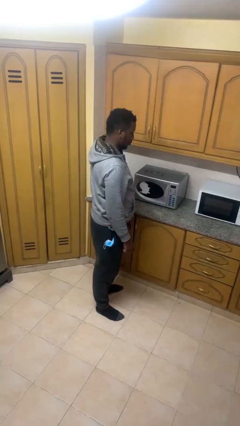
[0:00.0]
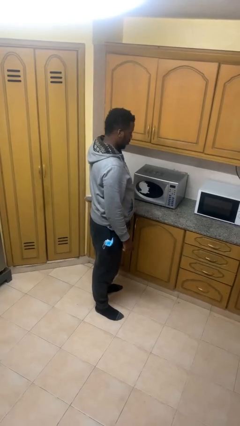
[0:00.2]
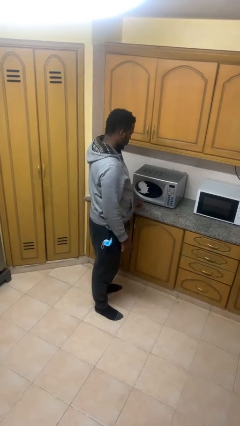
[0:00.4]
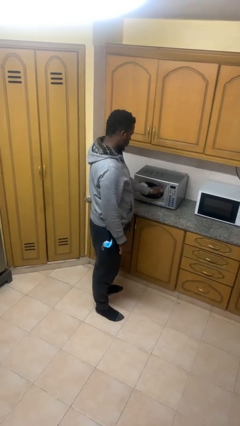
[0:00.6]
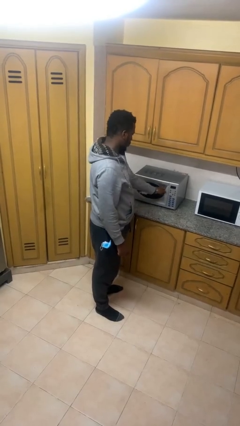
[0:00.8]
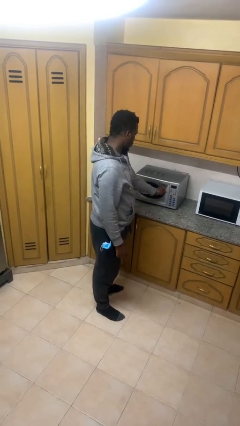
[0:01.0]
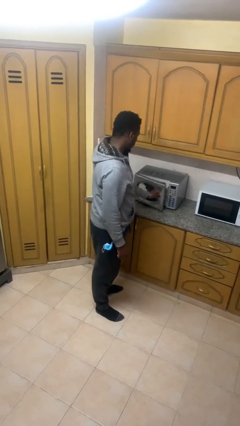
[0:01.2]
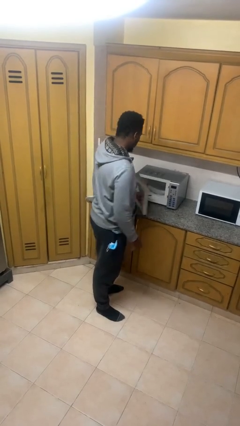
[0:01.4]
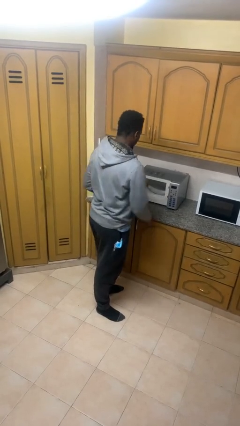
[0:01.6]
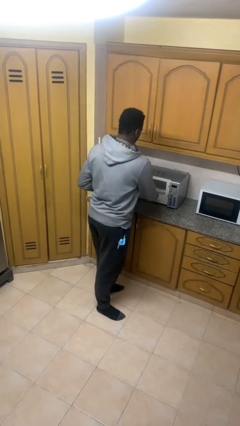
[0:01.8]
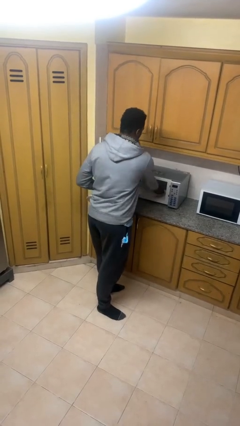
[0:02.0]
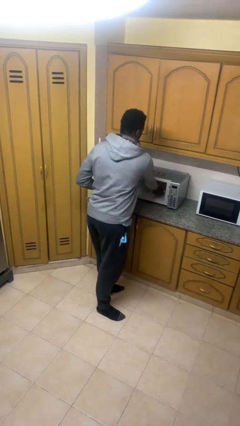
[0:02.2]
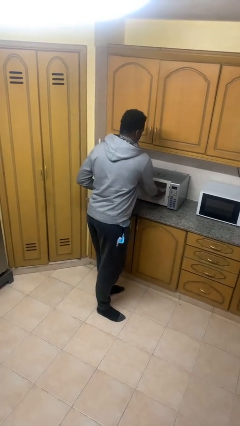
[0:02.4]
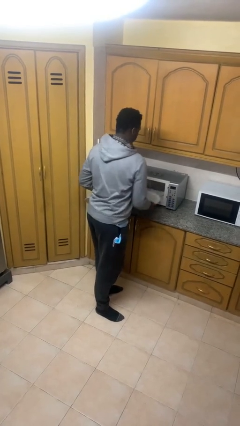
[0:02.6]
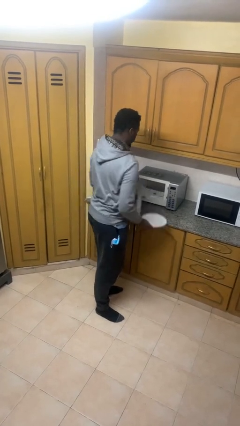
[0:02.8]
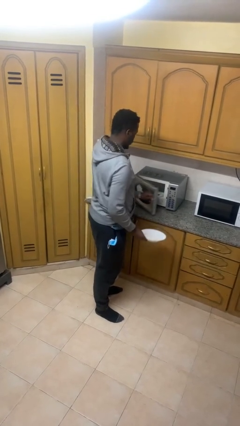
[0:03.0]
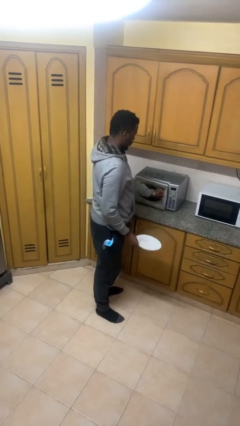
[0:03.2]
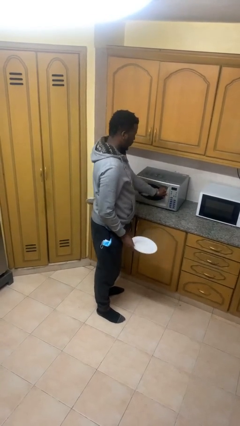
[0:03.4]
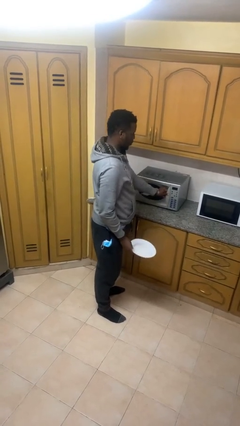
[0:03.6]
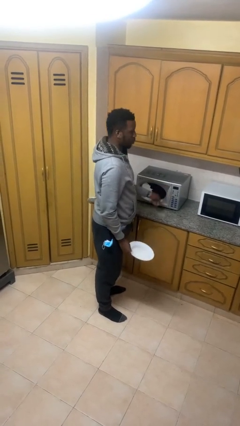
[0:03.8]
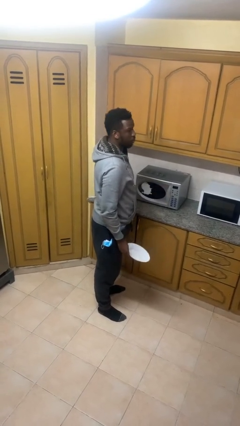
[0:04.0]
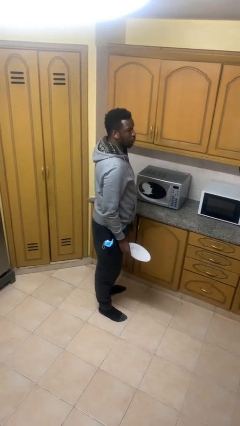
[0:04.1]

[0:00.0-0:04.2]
person takes object from microwave

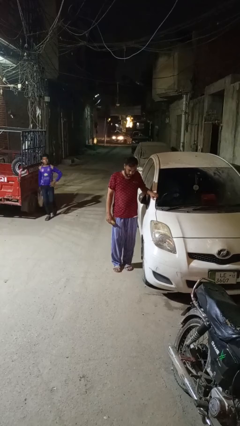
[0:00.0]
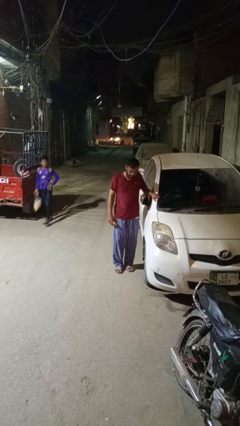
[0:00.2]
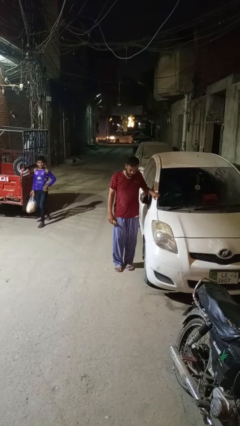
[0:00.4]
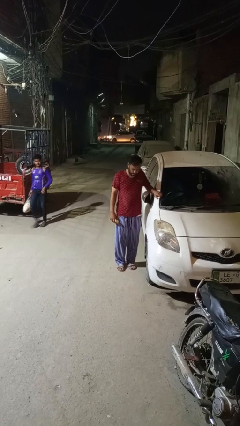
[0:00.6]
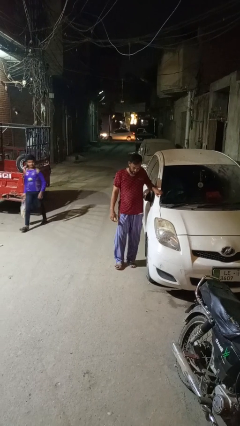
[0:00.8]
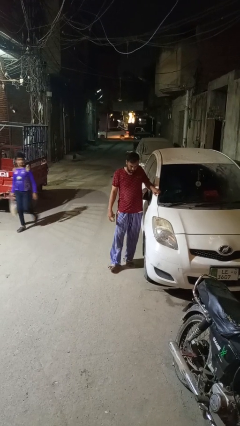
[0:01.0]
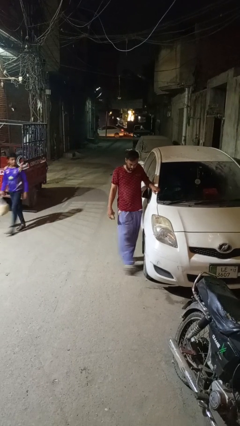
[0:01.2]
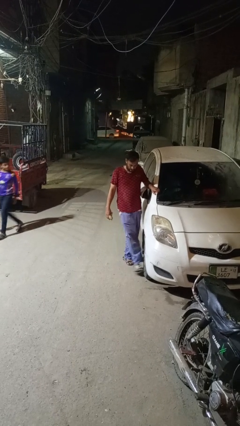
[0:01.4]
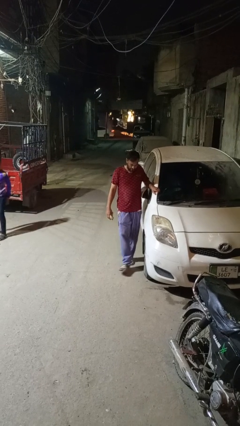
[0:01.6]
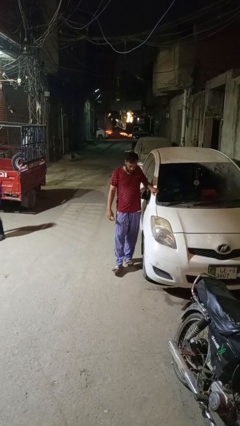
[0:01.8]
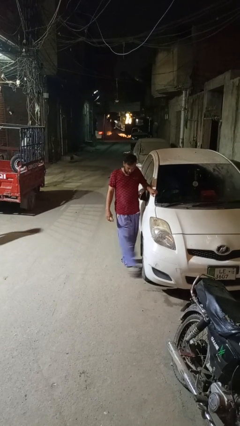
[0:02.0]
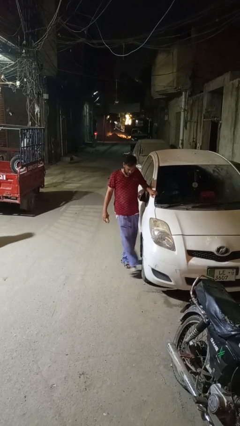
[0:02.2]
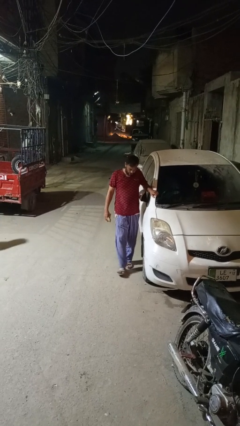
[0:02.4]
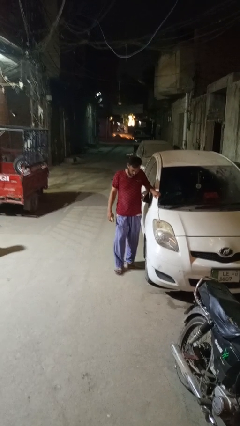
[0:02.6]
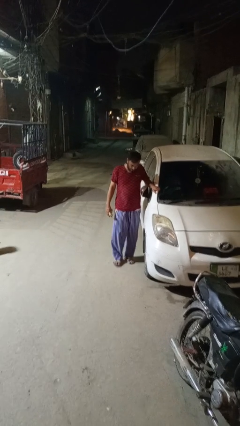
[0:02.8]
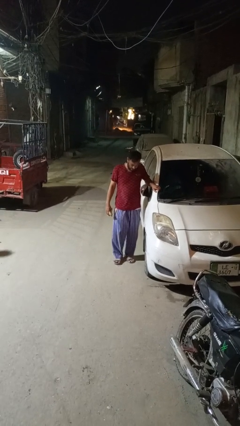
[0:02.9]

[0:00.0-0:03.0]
person kicks car tires

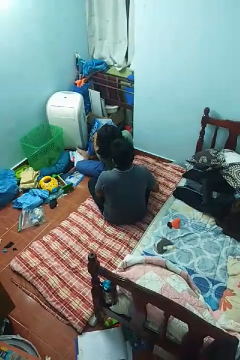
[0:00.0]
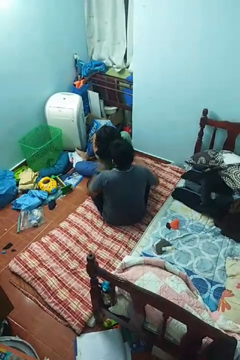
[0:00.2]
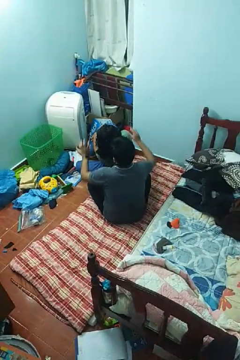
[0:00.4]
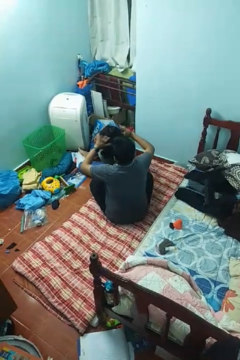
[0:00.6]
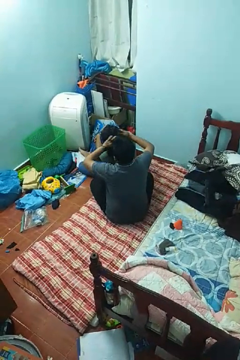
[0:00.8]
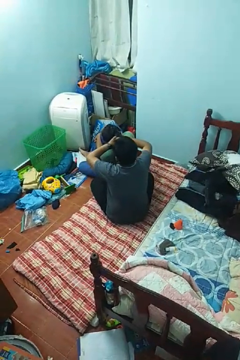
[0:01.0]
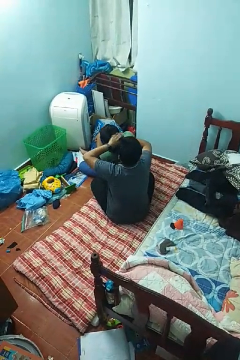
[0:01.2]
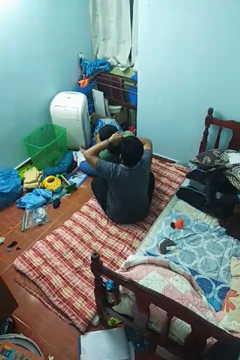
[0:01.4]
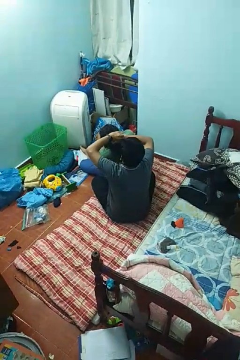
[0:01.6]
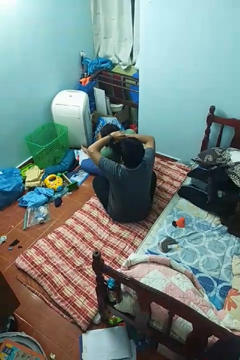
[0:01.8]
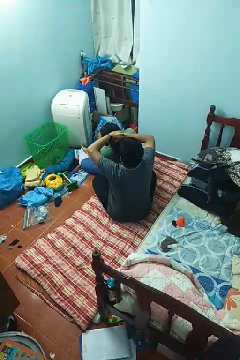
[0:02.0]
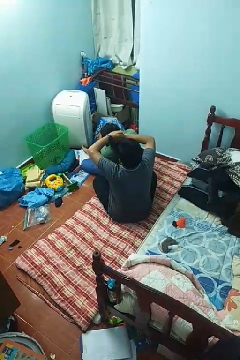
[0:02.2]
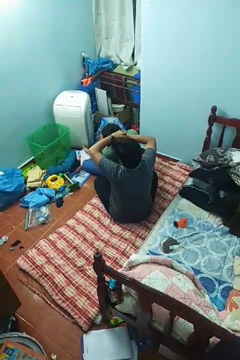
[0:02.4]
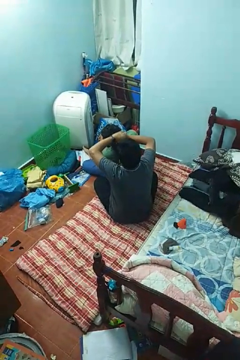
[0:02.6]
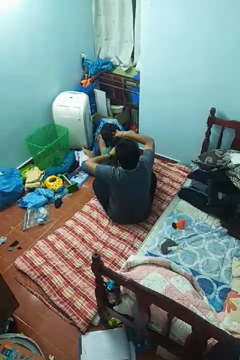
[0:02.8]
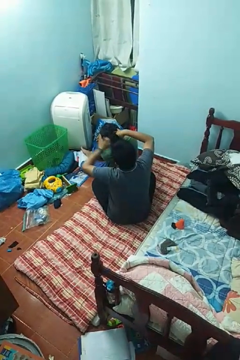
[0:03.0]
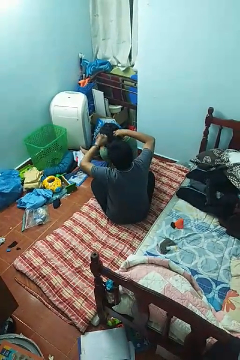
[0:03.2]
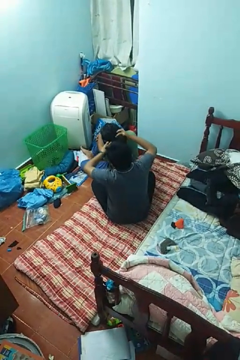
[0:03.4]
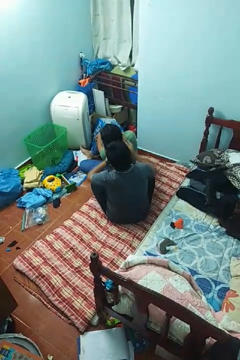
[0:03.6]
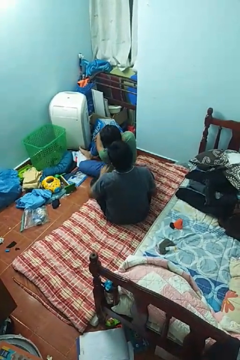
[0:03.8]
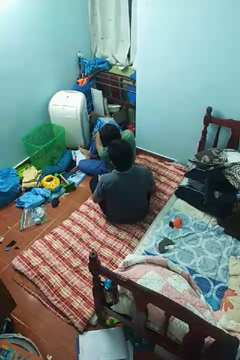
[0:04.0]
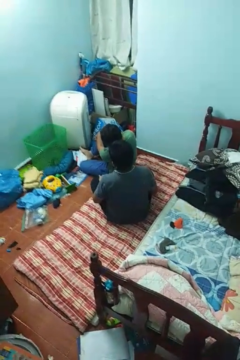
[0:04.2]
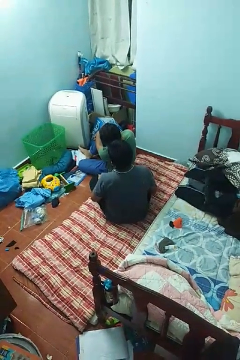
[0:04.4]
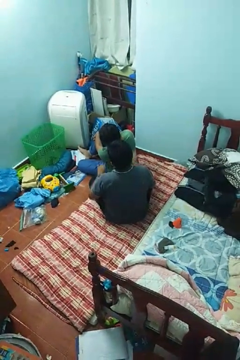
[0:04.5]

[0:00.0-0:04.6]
person braids hair of person

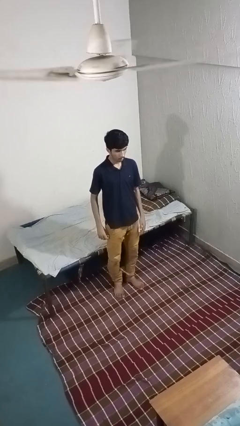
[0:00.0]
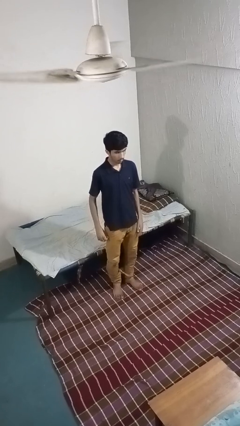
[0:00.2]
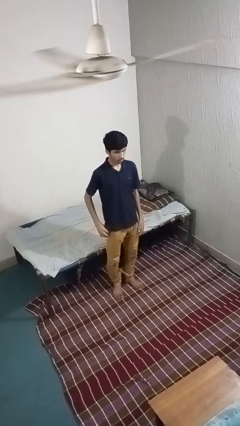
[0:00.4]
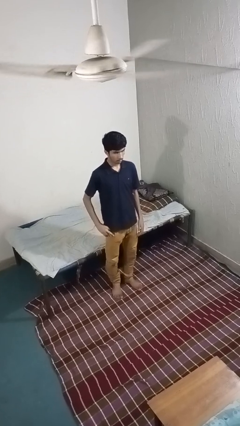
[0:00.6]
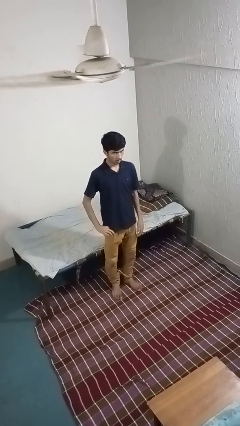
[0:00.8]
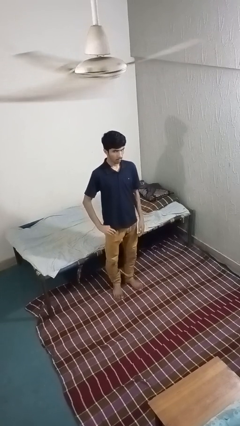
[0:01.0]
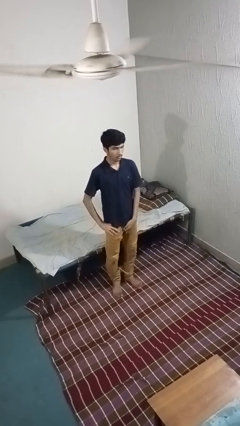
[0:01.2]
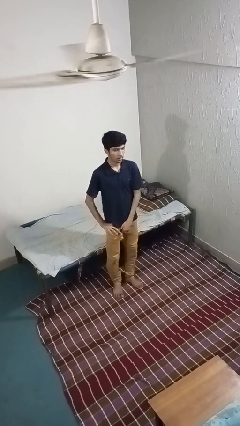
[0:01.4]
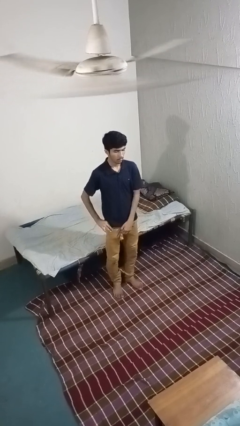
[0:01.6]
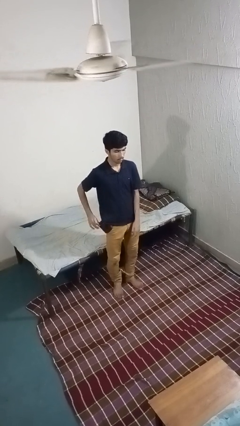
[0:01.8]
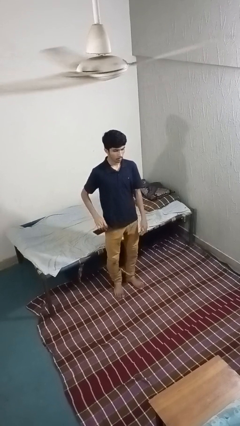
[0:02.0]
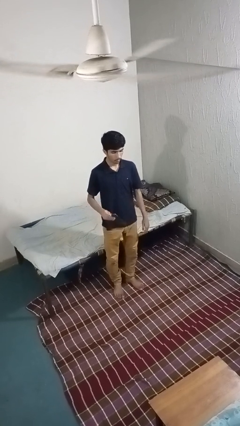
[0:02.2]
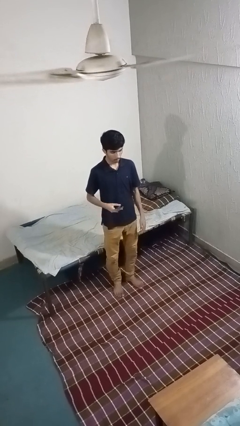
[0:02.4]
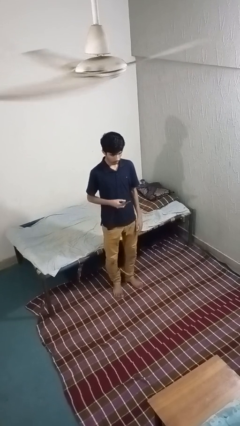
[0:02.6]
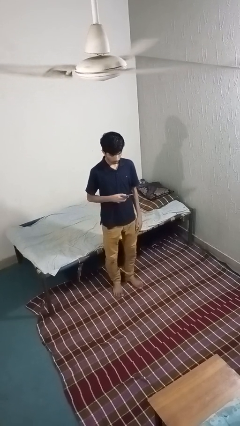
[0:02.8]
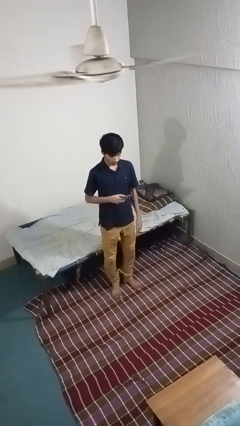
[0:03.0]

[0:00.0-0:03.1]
person takes phone from pocket

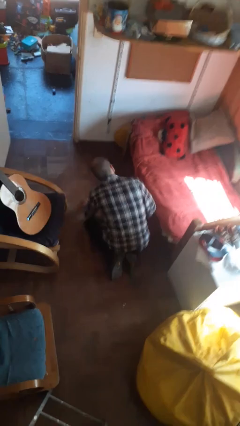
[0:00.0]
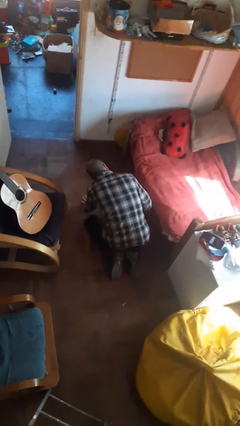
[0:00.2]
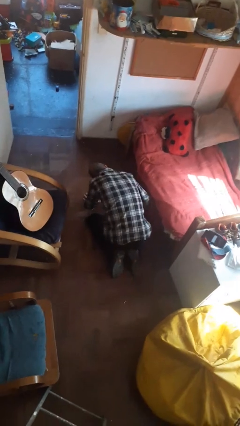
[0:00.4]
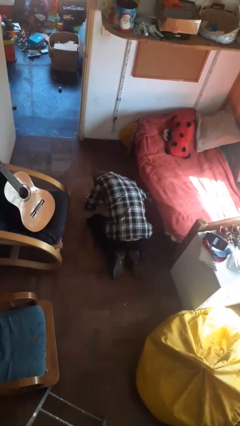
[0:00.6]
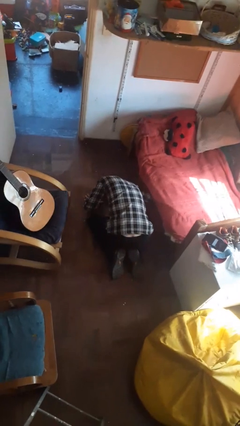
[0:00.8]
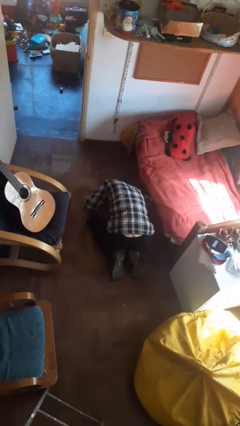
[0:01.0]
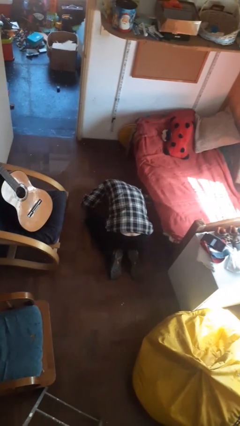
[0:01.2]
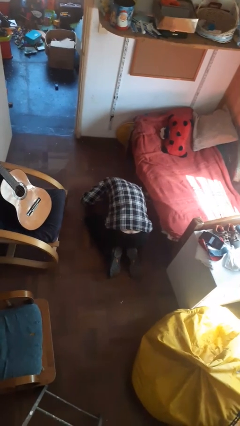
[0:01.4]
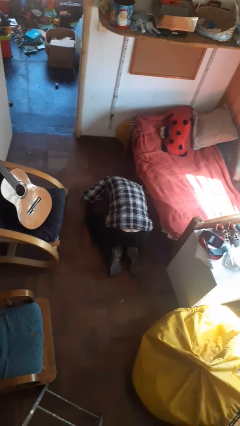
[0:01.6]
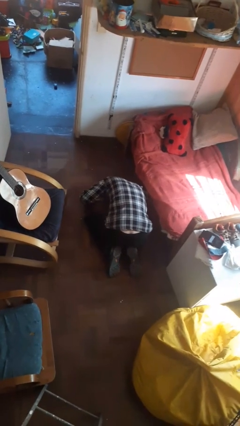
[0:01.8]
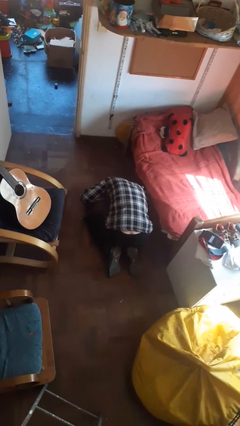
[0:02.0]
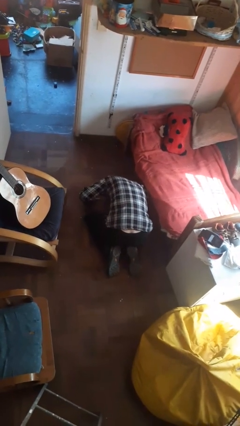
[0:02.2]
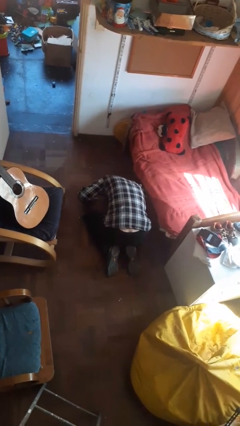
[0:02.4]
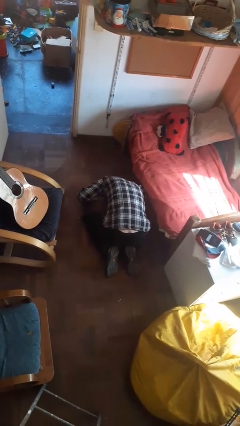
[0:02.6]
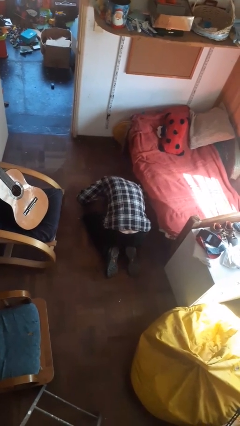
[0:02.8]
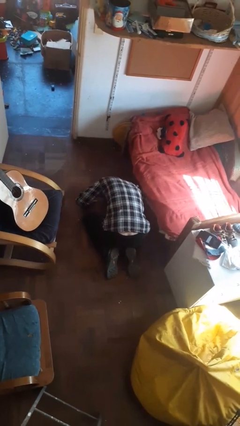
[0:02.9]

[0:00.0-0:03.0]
person searches under bed

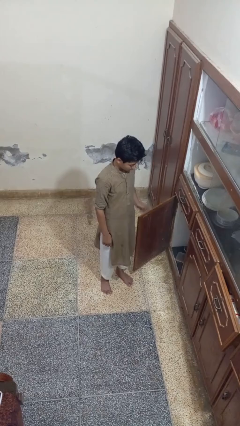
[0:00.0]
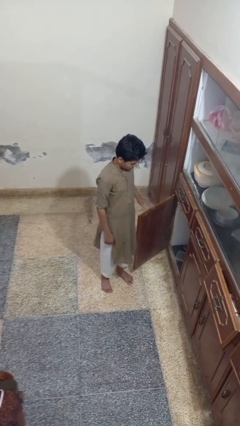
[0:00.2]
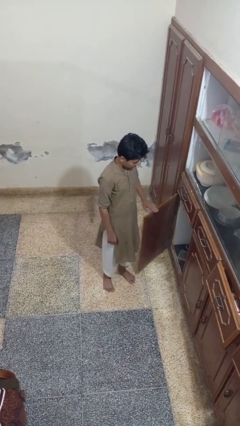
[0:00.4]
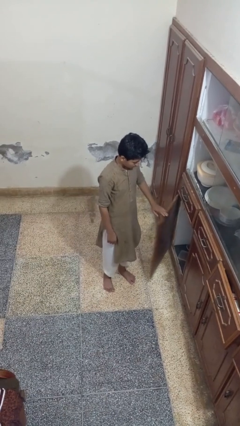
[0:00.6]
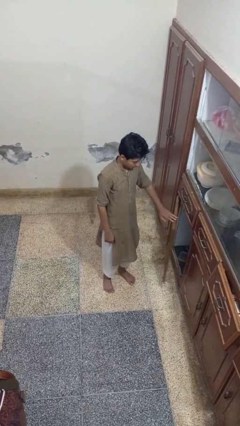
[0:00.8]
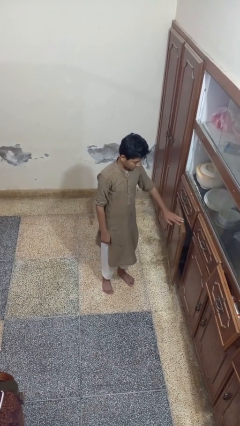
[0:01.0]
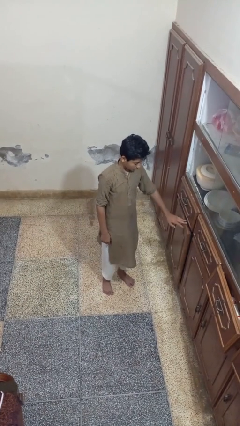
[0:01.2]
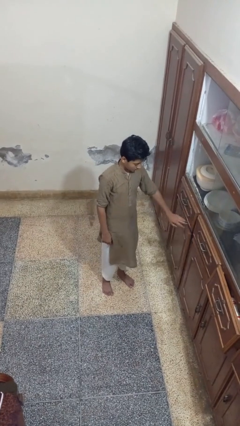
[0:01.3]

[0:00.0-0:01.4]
person closes cabinet
